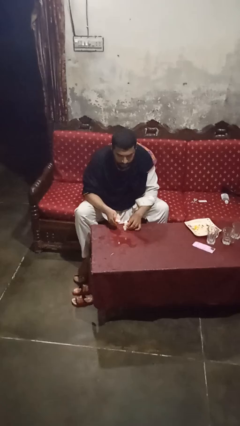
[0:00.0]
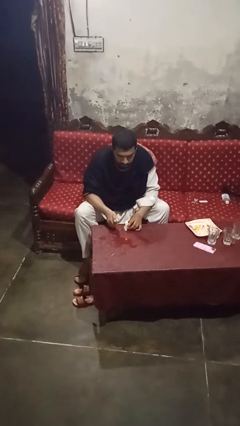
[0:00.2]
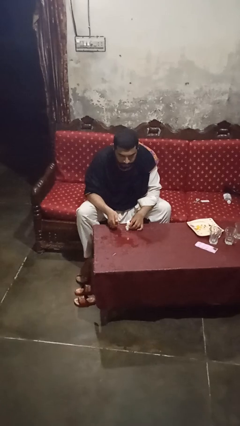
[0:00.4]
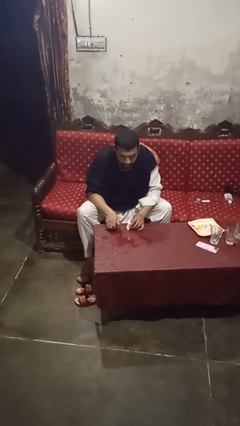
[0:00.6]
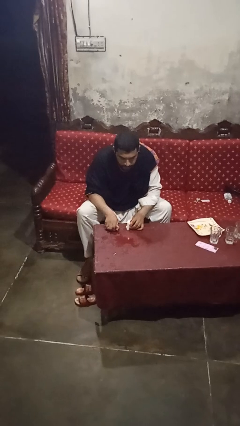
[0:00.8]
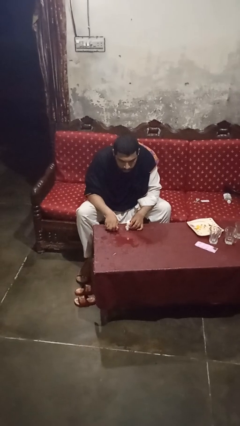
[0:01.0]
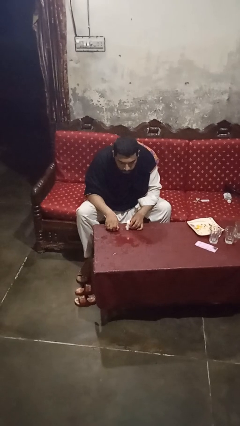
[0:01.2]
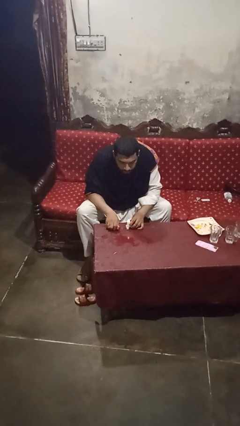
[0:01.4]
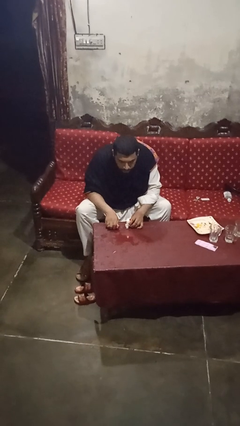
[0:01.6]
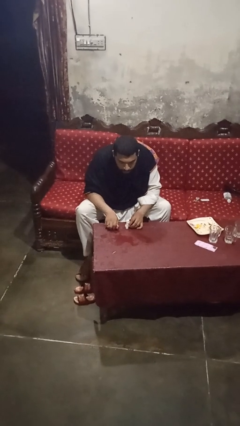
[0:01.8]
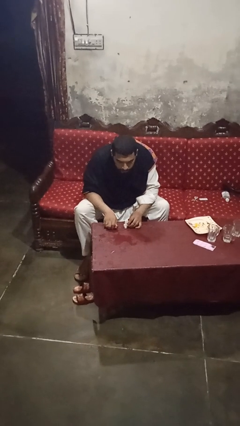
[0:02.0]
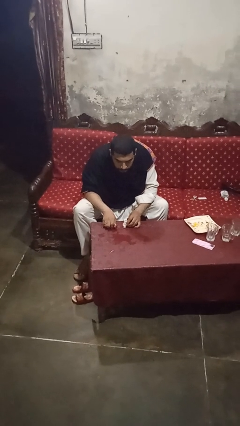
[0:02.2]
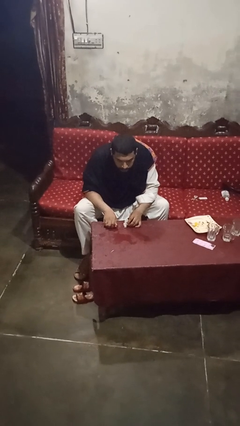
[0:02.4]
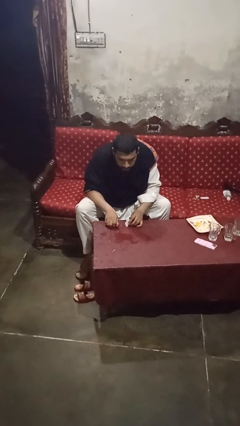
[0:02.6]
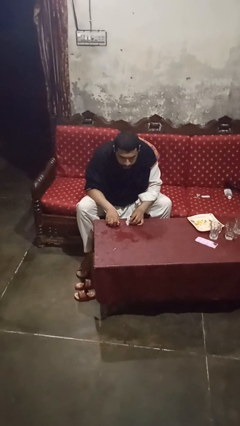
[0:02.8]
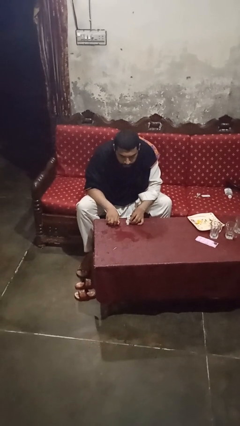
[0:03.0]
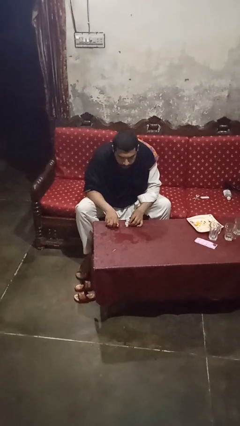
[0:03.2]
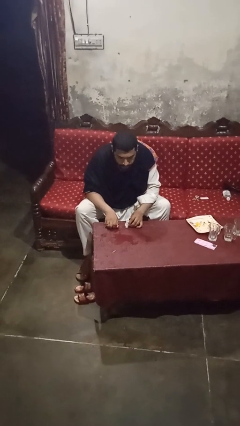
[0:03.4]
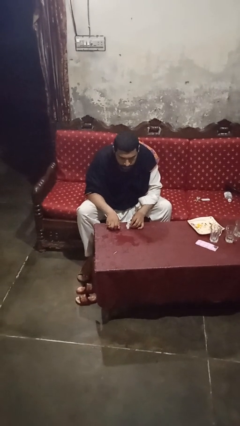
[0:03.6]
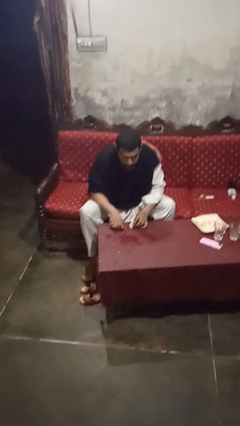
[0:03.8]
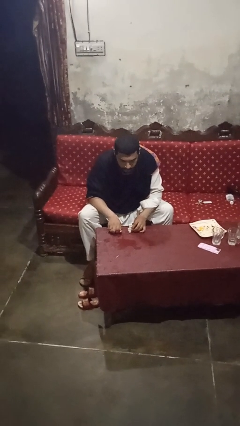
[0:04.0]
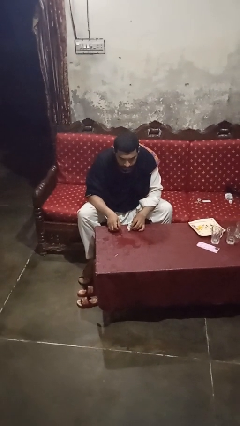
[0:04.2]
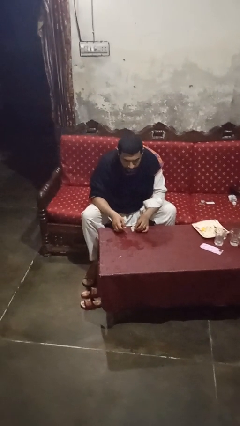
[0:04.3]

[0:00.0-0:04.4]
person extinguishes candle

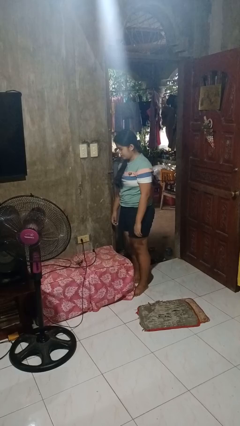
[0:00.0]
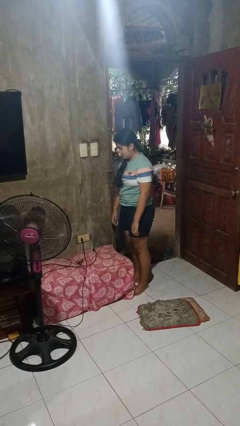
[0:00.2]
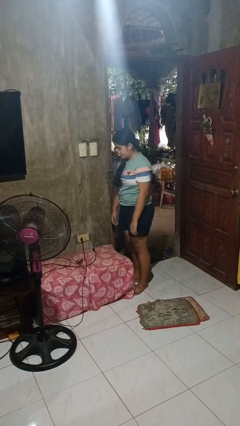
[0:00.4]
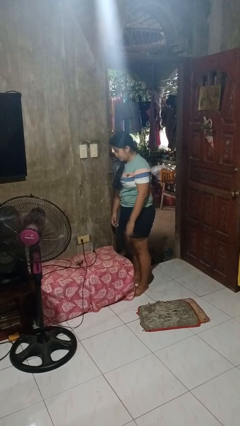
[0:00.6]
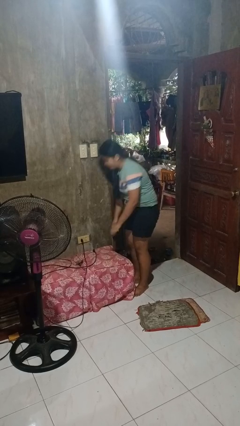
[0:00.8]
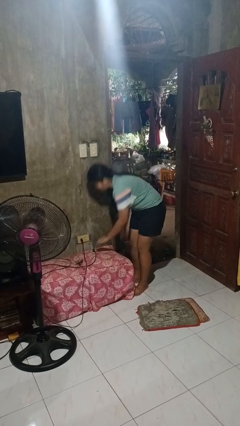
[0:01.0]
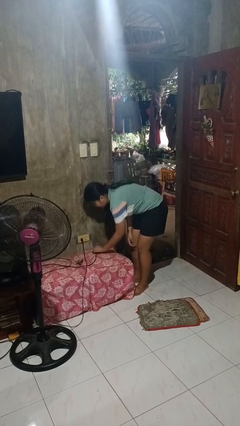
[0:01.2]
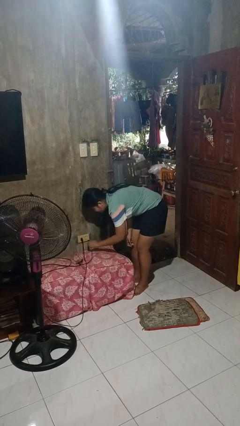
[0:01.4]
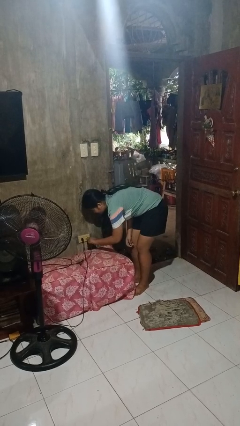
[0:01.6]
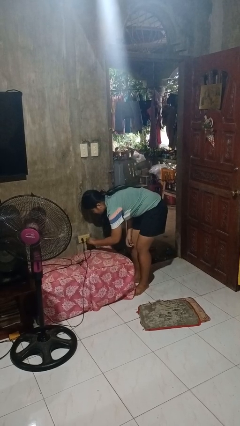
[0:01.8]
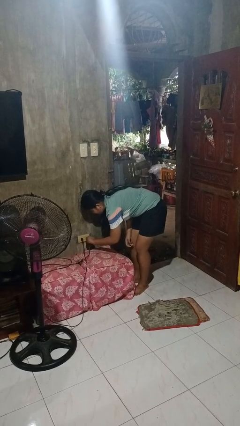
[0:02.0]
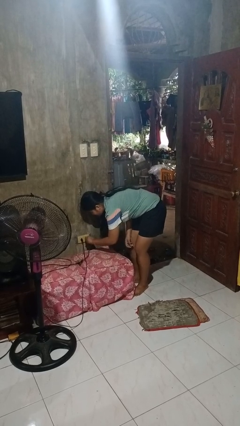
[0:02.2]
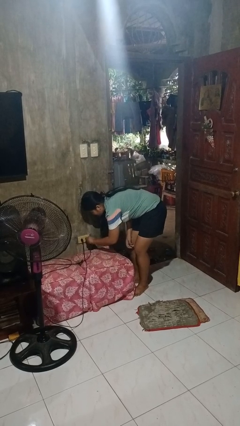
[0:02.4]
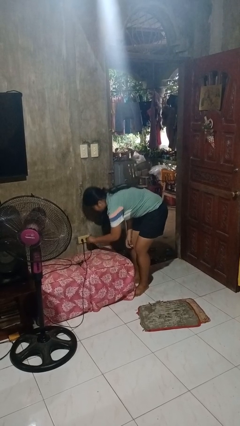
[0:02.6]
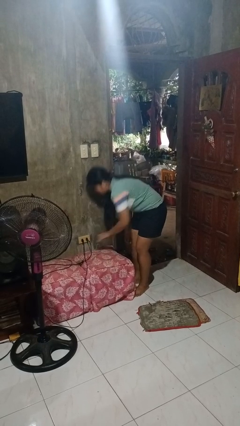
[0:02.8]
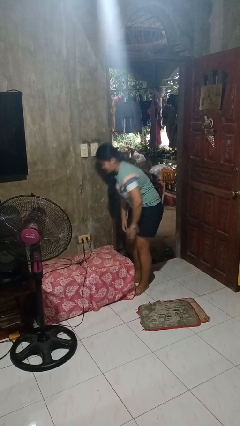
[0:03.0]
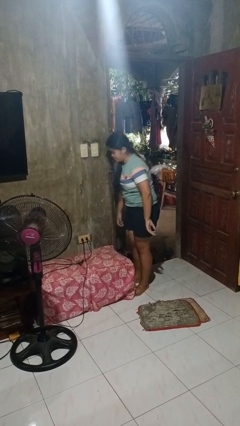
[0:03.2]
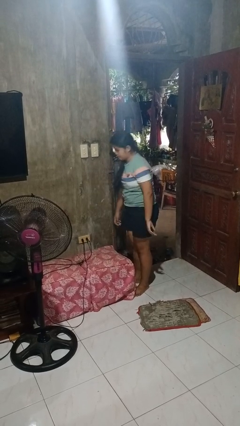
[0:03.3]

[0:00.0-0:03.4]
person plugs into electrical socket

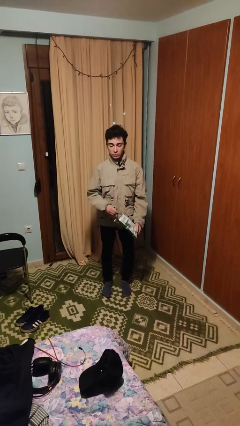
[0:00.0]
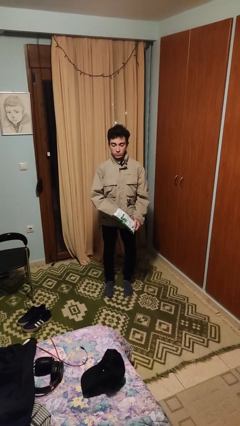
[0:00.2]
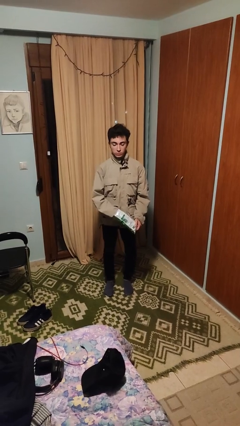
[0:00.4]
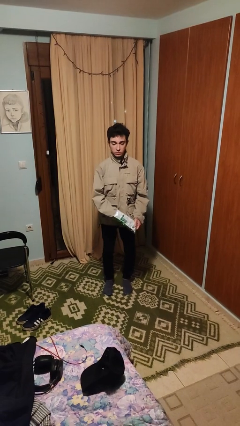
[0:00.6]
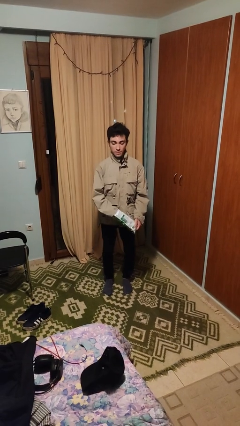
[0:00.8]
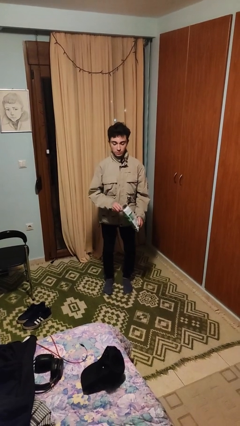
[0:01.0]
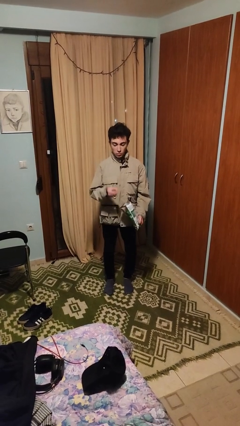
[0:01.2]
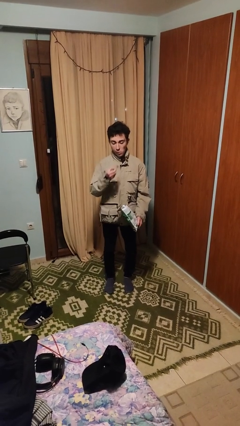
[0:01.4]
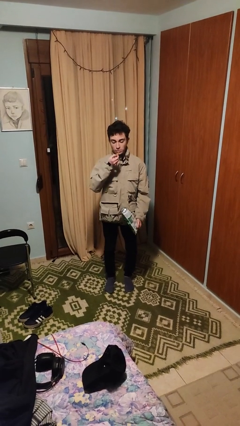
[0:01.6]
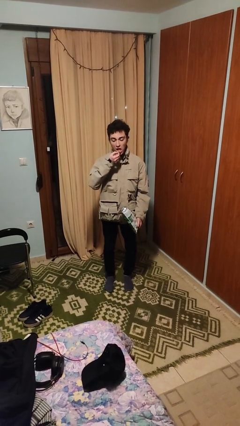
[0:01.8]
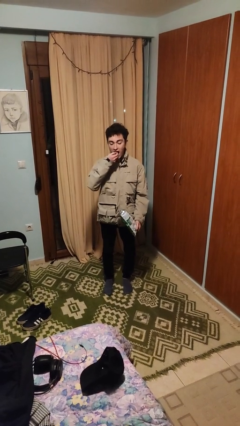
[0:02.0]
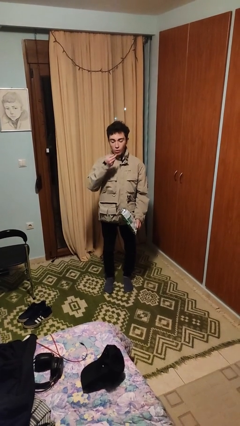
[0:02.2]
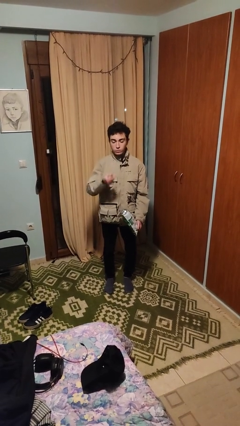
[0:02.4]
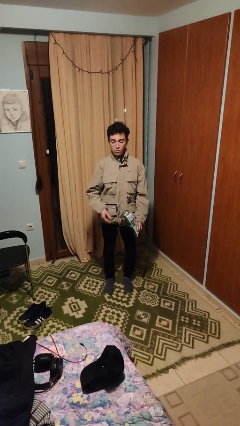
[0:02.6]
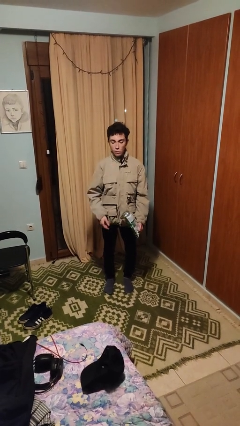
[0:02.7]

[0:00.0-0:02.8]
person eats snack from bag

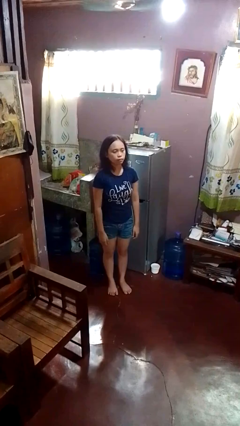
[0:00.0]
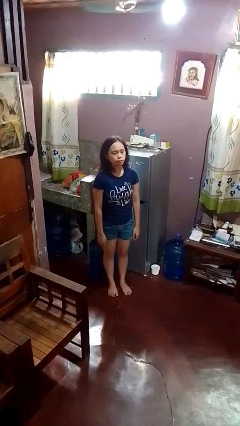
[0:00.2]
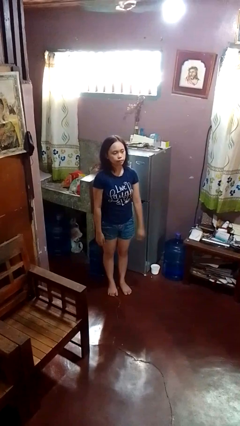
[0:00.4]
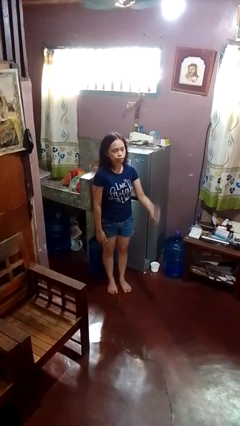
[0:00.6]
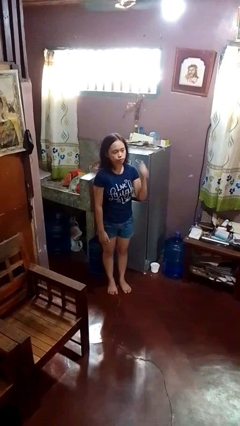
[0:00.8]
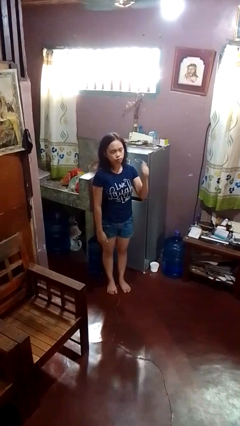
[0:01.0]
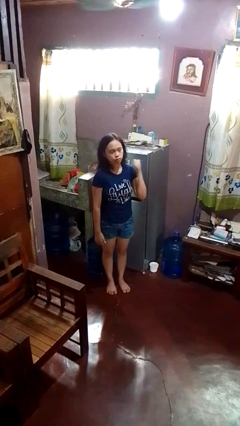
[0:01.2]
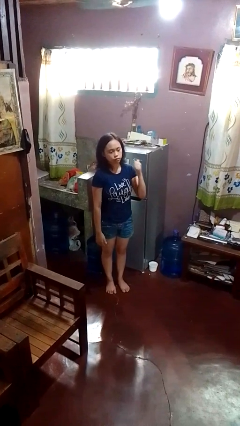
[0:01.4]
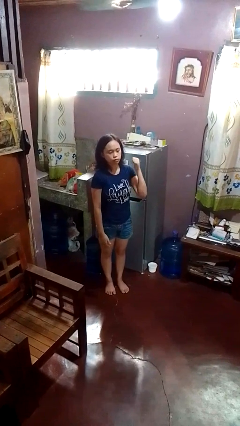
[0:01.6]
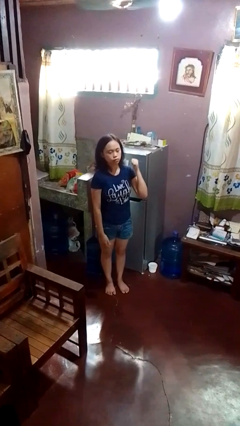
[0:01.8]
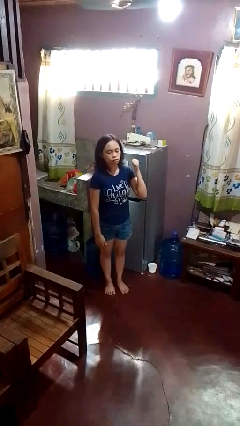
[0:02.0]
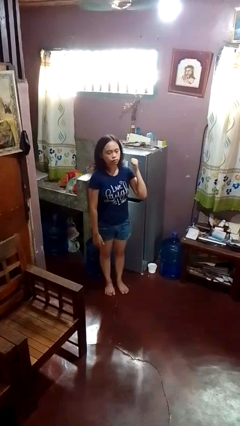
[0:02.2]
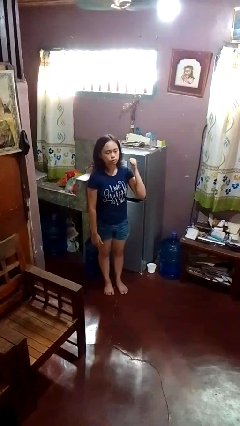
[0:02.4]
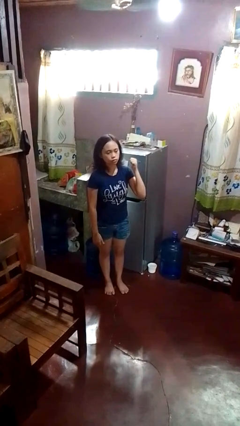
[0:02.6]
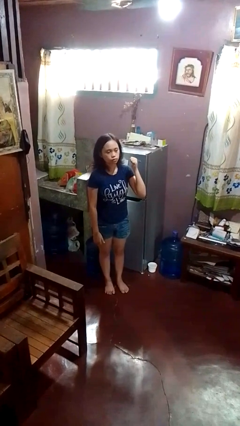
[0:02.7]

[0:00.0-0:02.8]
person gestures behind me

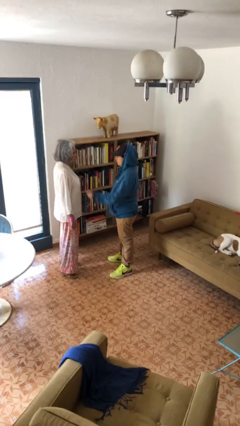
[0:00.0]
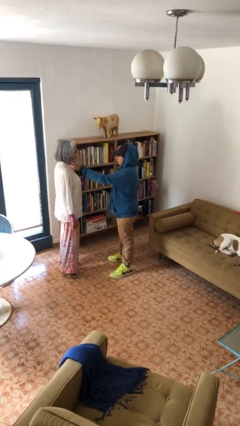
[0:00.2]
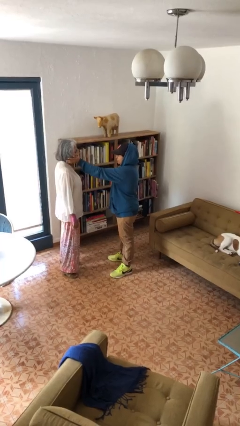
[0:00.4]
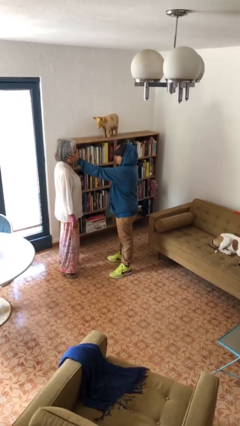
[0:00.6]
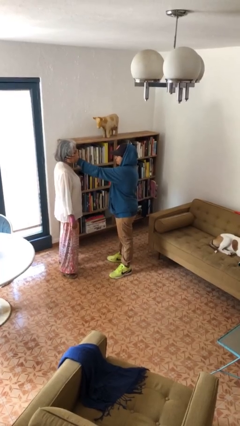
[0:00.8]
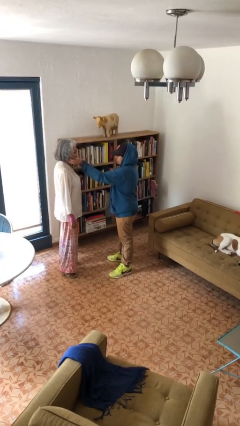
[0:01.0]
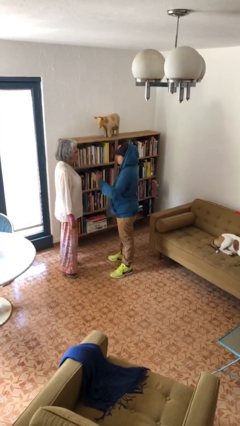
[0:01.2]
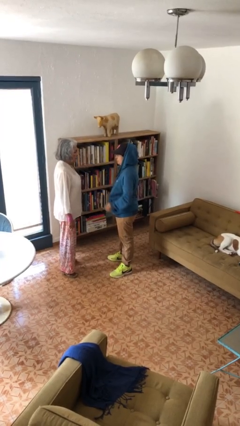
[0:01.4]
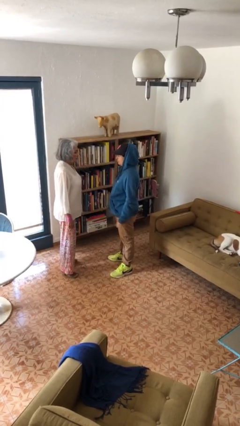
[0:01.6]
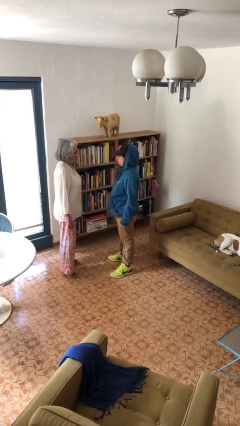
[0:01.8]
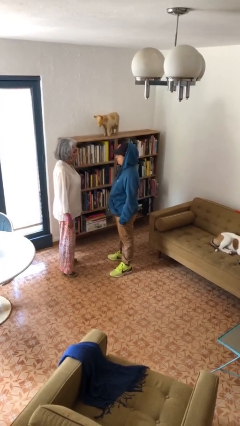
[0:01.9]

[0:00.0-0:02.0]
person touches face of person

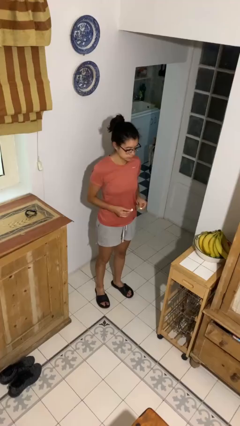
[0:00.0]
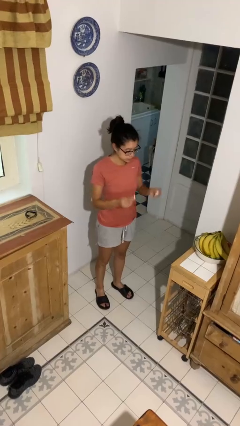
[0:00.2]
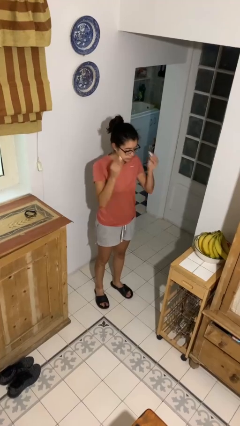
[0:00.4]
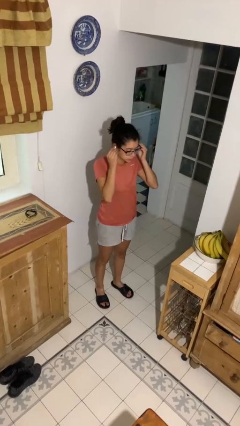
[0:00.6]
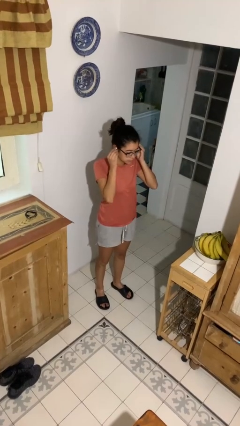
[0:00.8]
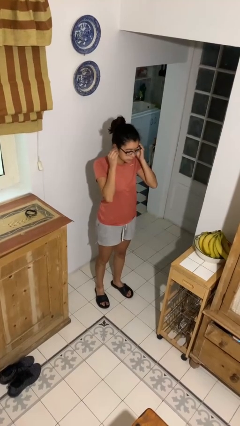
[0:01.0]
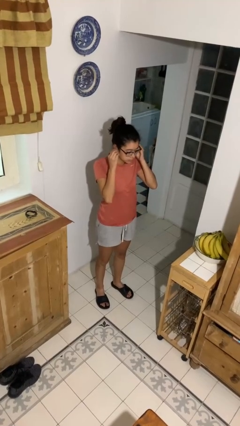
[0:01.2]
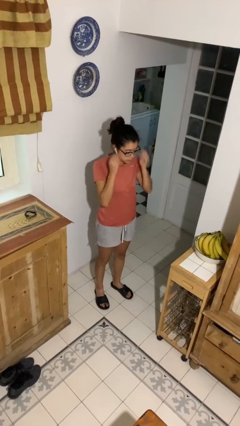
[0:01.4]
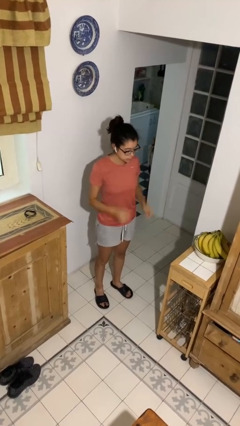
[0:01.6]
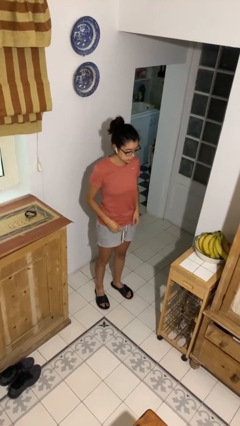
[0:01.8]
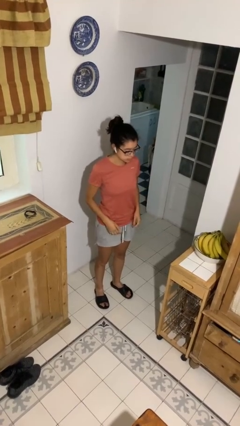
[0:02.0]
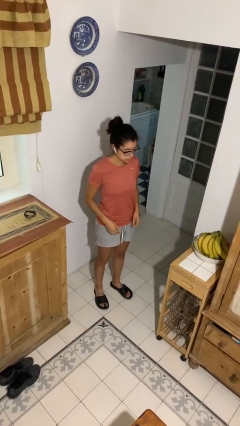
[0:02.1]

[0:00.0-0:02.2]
person puts on headphones
